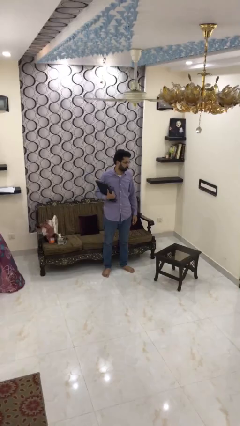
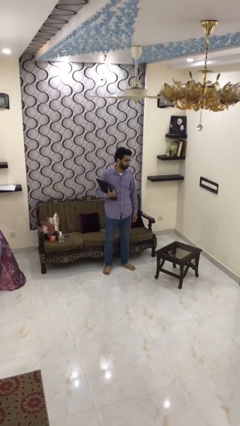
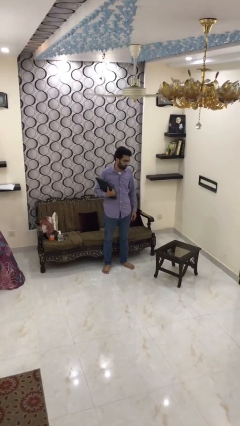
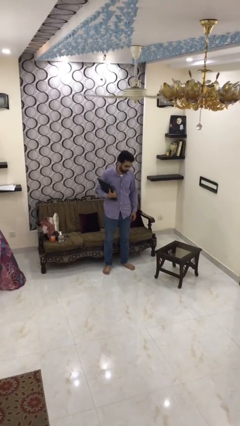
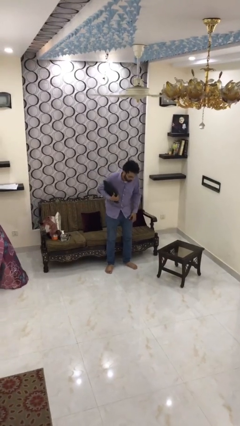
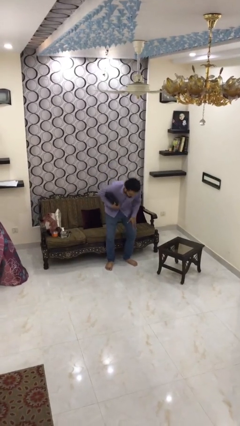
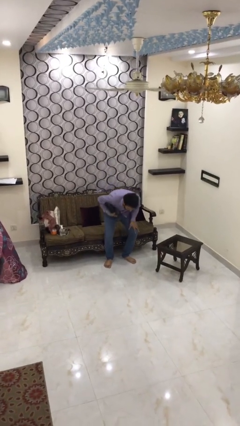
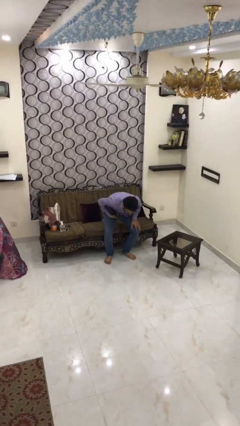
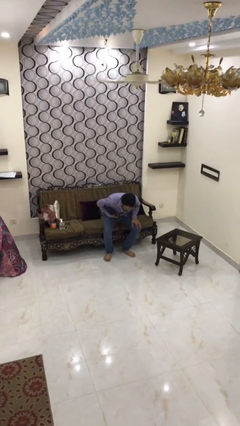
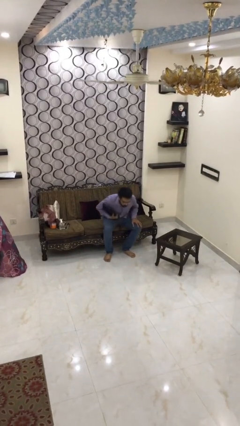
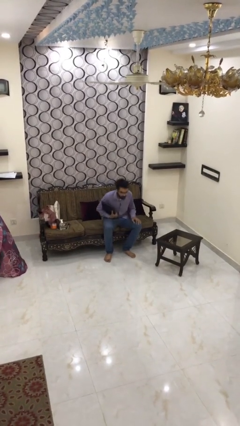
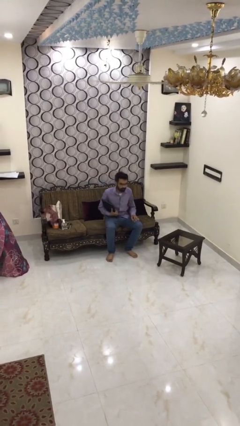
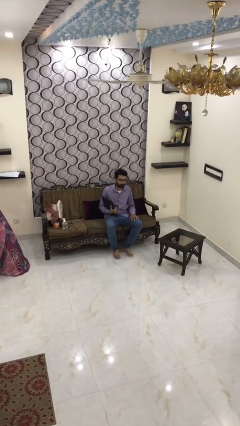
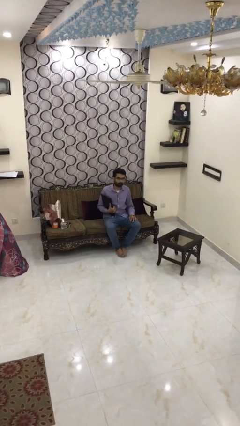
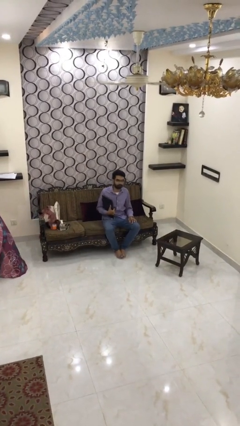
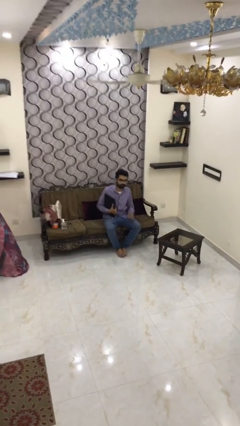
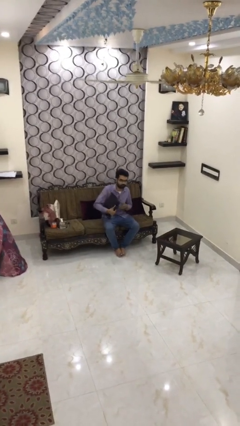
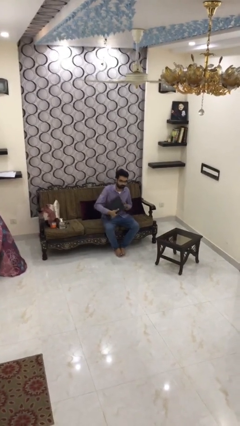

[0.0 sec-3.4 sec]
person sits down

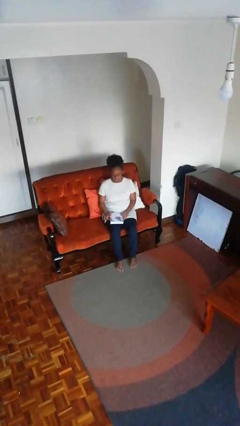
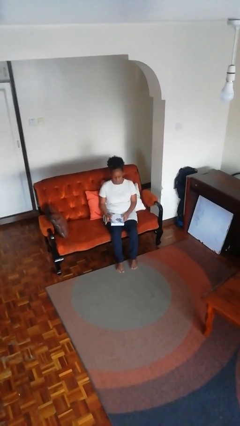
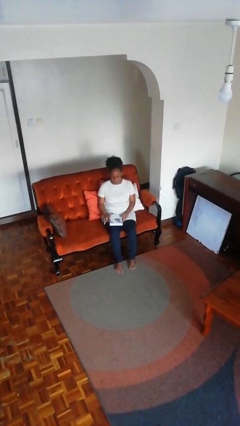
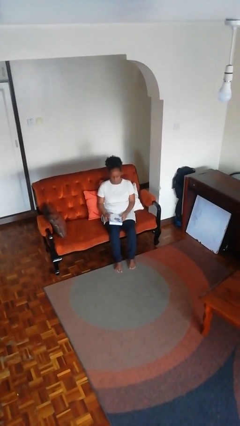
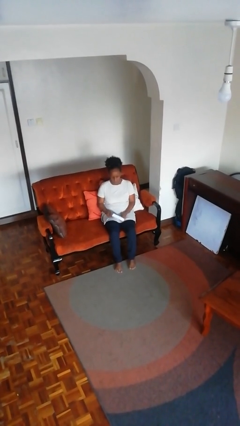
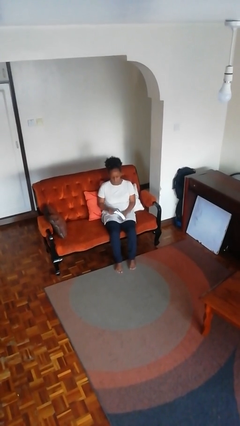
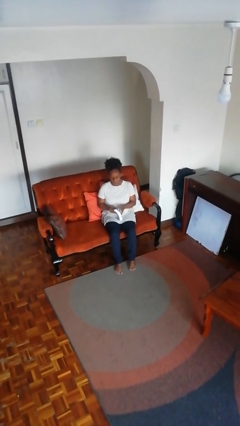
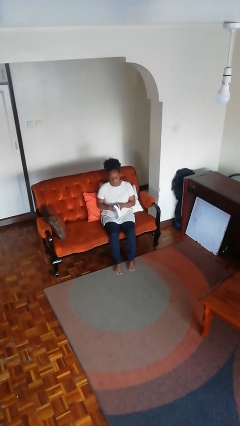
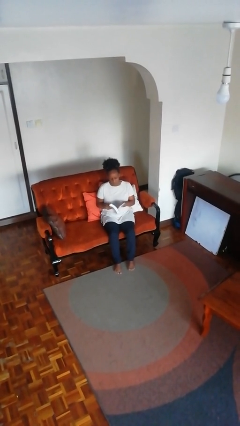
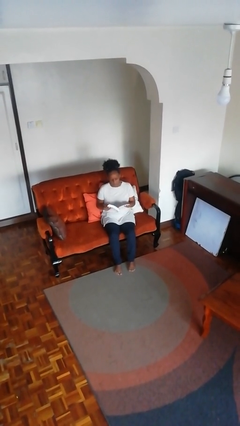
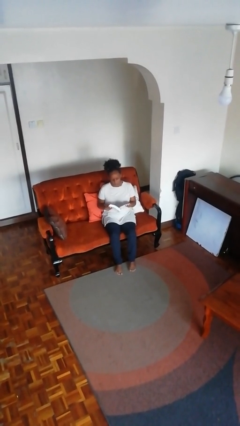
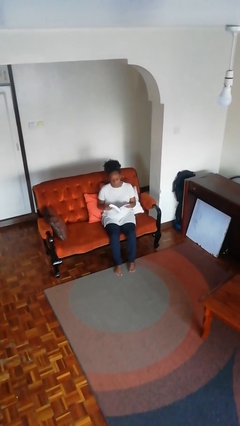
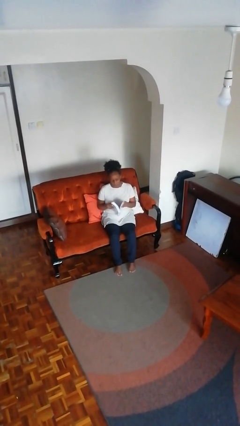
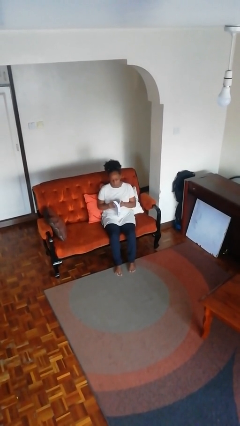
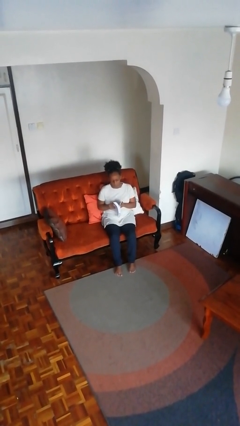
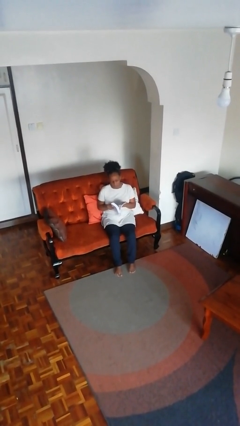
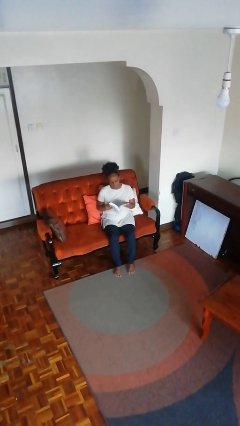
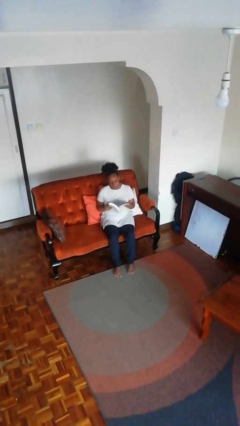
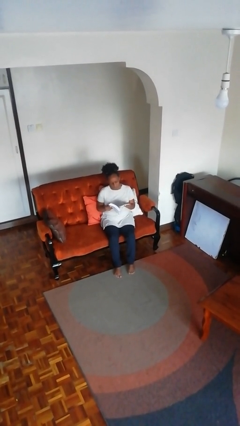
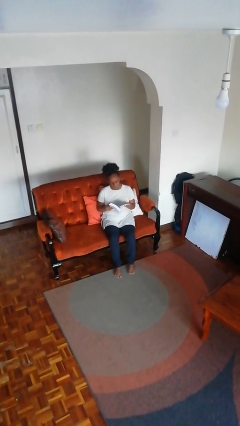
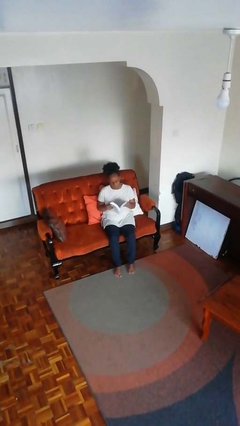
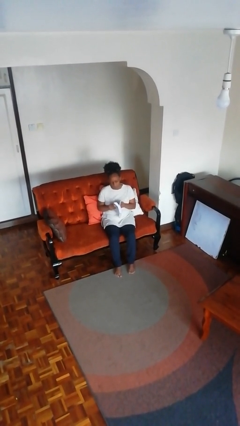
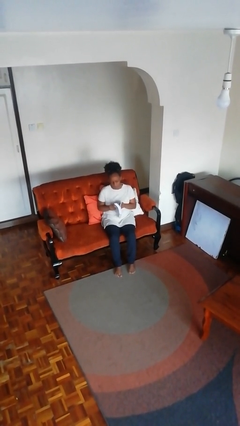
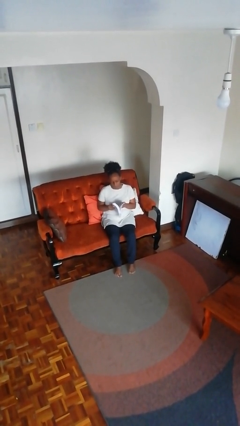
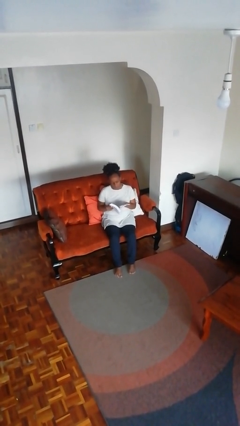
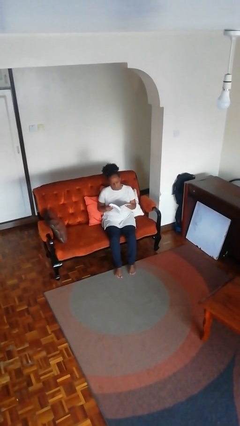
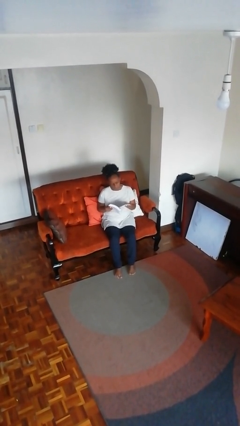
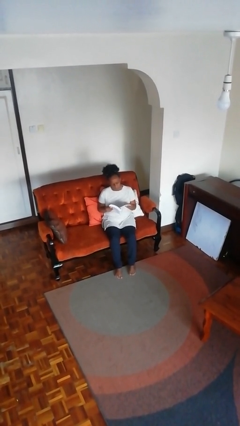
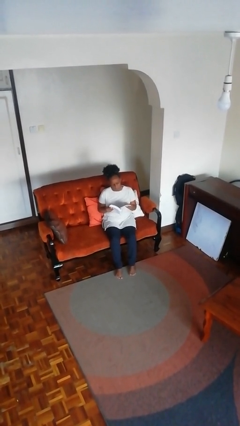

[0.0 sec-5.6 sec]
person reads book

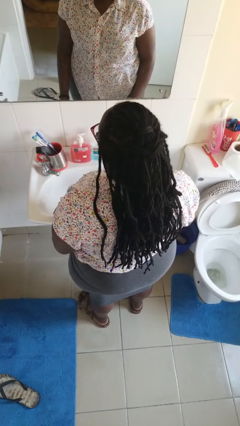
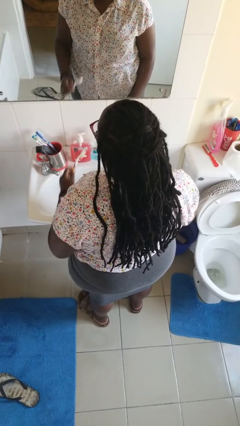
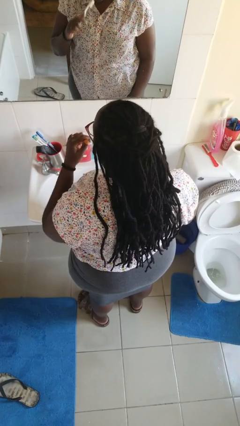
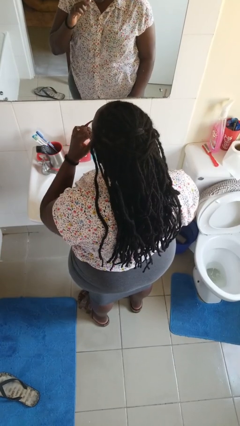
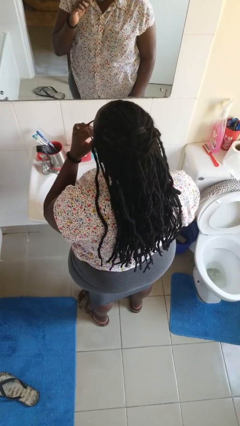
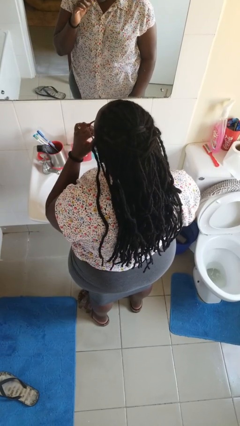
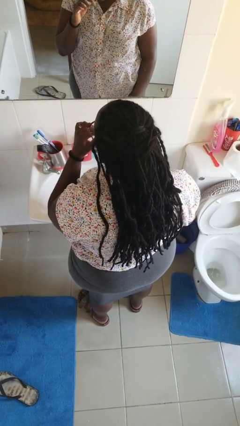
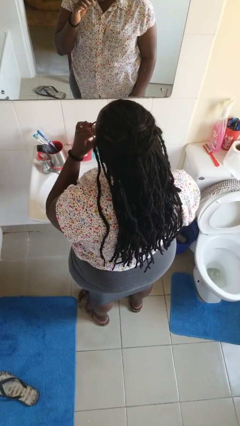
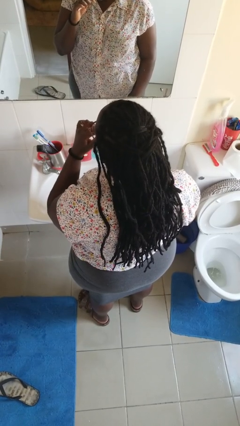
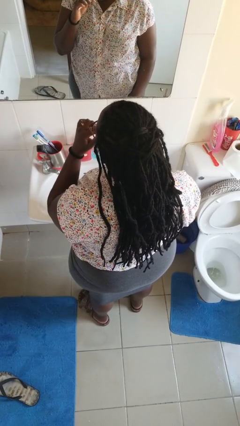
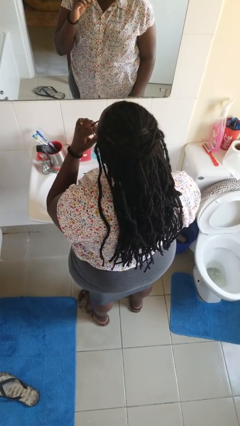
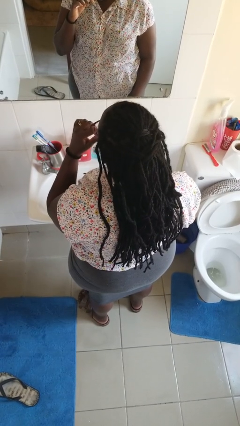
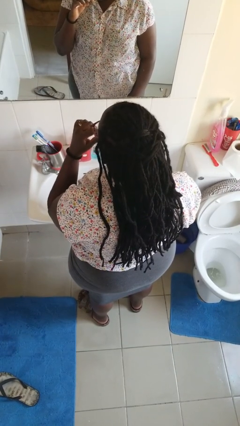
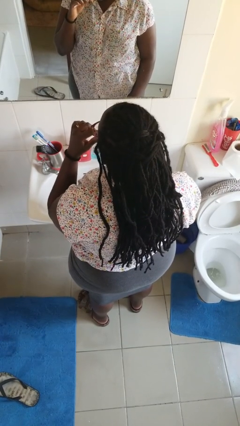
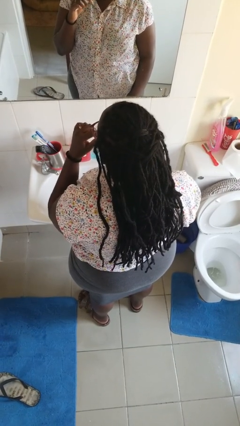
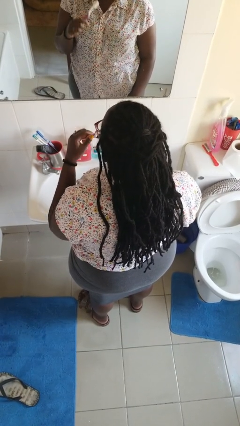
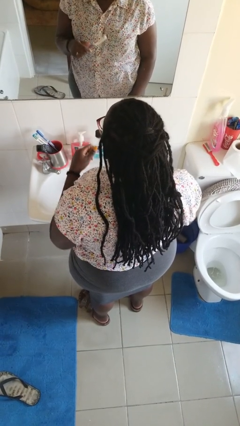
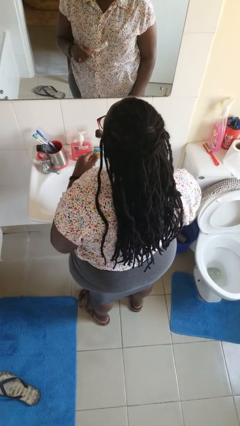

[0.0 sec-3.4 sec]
person brushes teeth

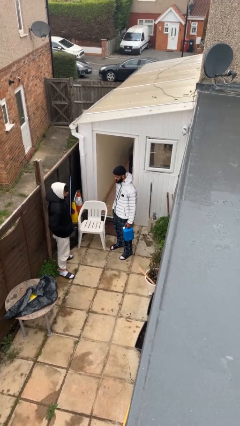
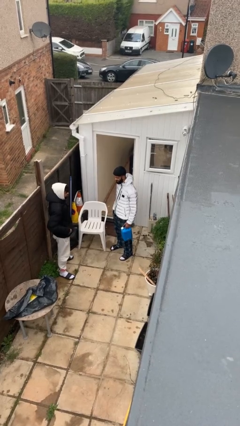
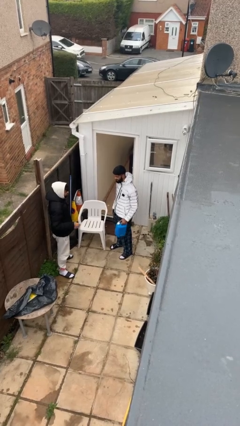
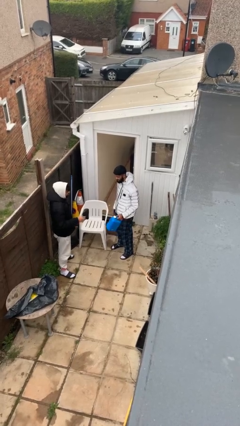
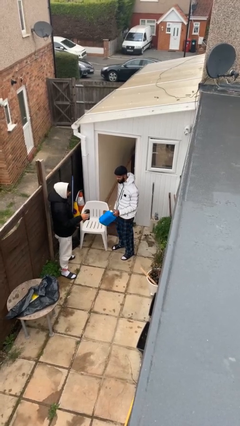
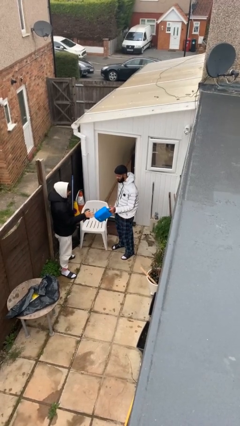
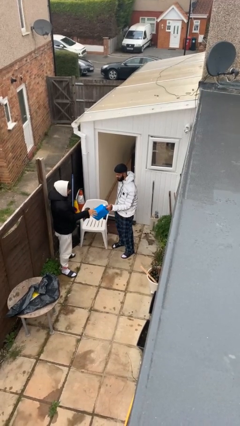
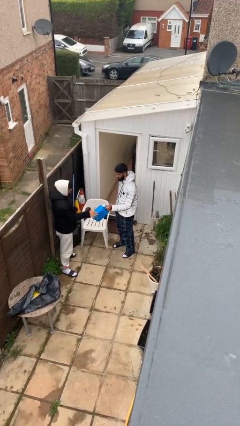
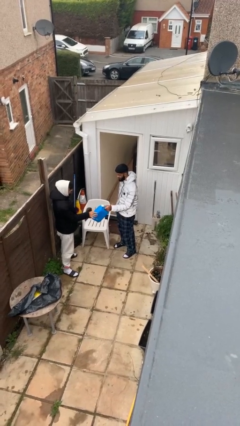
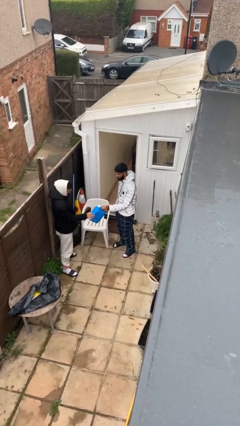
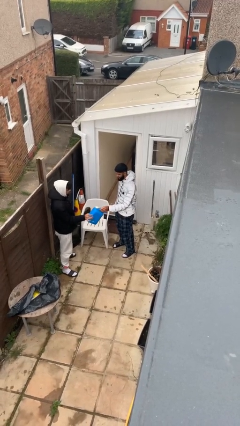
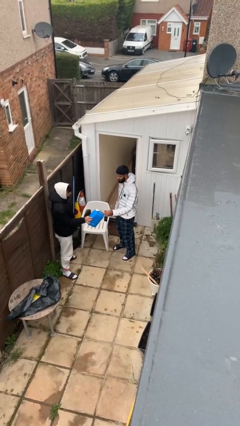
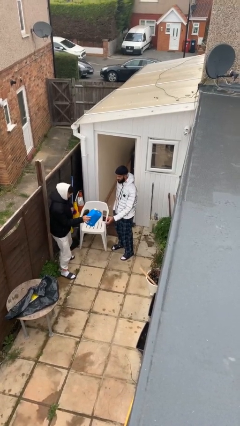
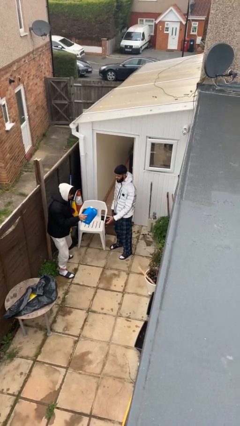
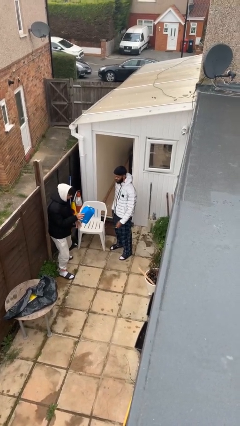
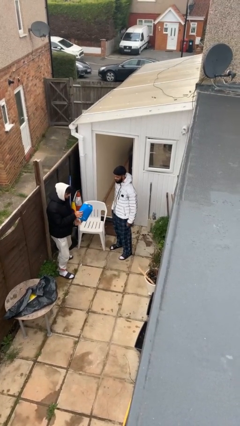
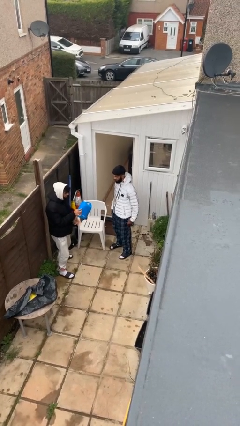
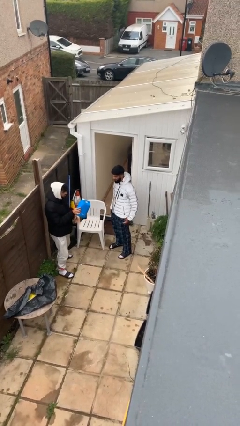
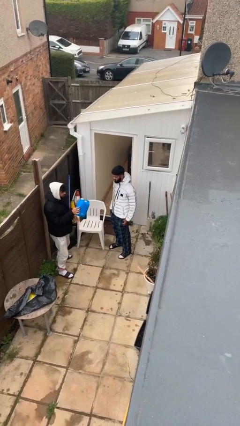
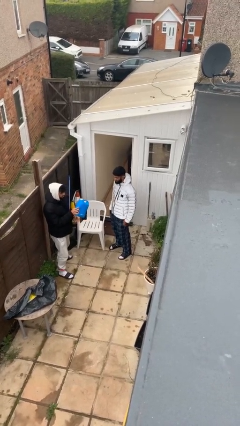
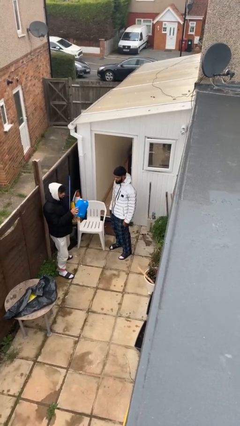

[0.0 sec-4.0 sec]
person transfers object to person

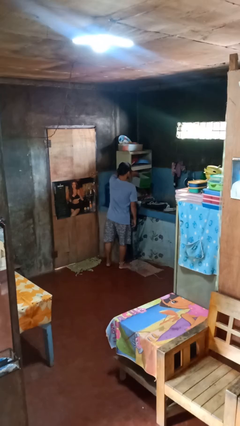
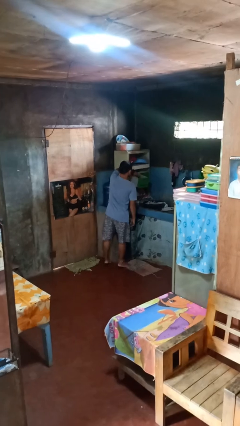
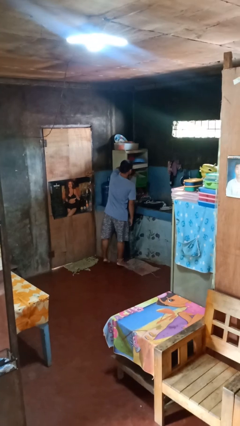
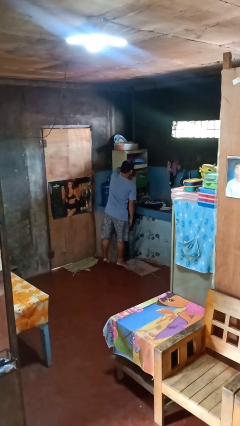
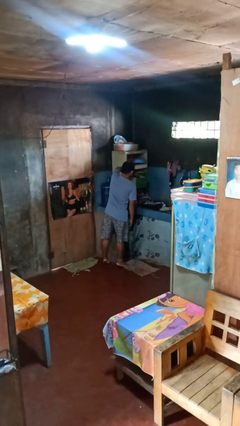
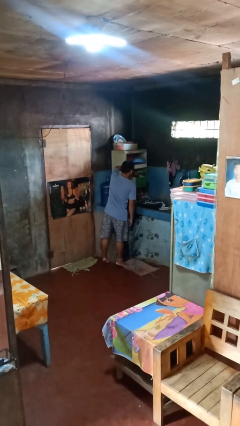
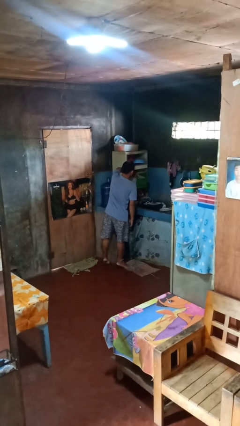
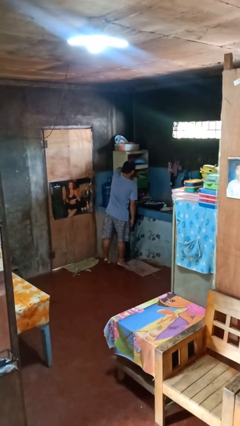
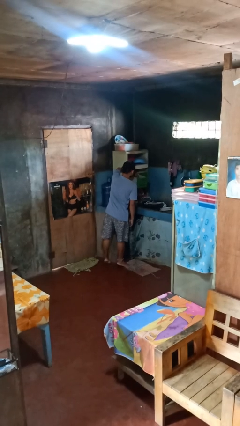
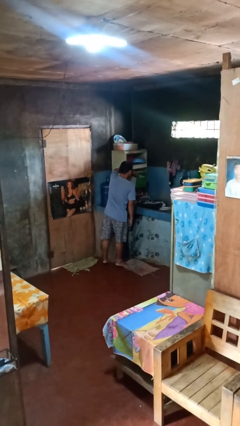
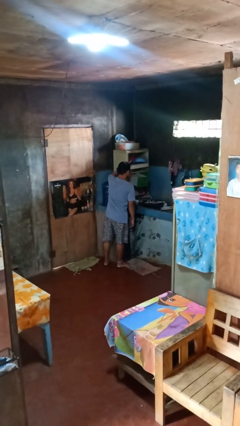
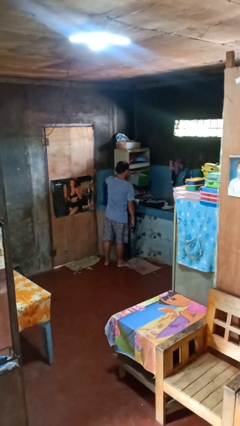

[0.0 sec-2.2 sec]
person searches in kitchen drawer
